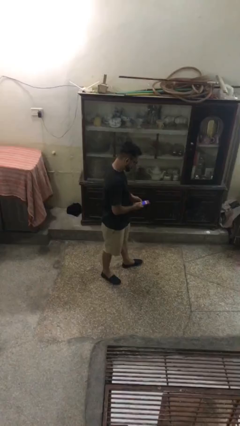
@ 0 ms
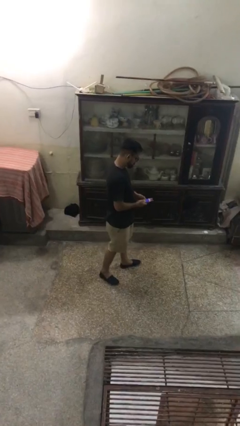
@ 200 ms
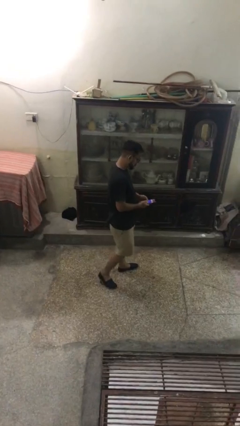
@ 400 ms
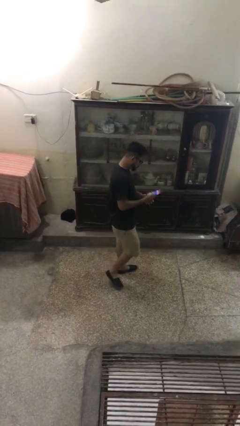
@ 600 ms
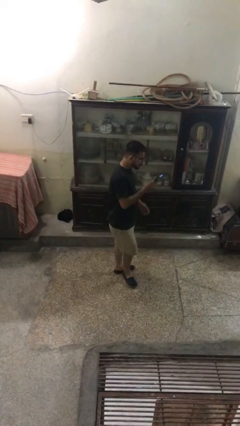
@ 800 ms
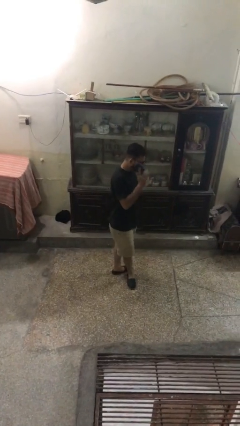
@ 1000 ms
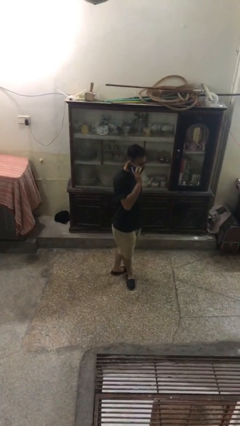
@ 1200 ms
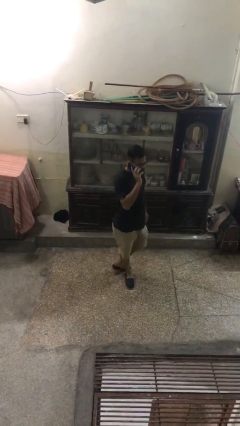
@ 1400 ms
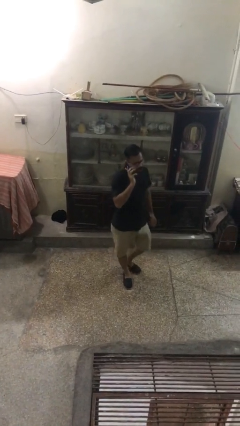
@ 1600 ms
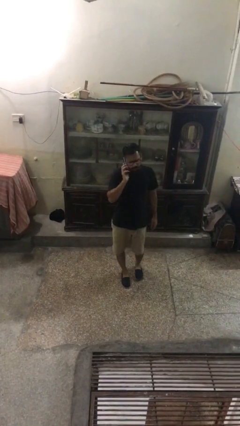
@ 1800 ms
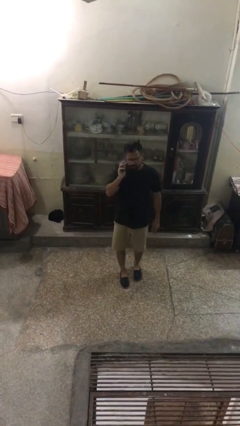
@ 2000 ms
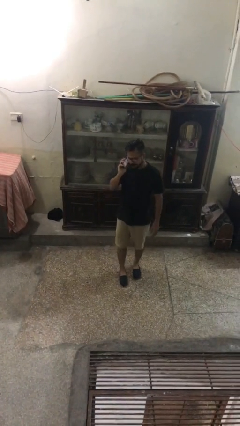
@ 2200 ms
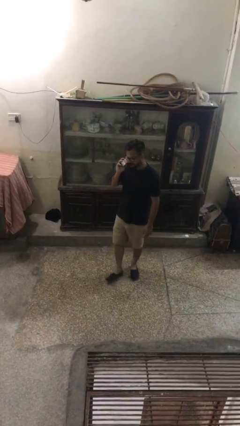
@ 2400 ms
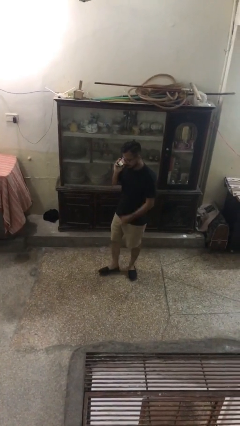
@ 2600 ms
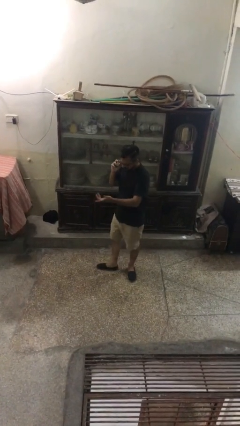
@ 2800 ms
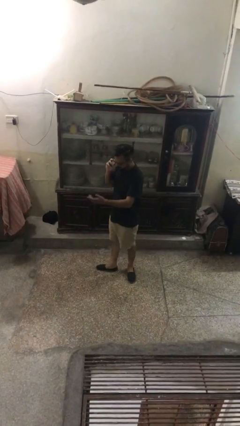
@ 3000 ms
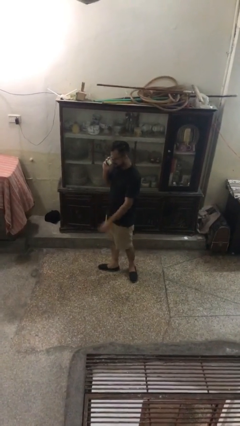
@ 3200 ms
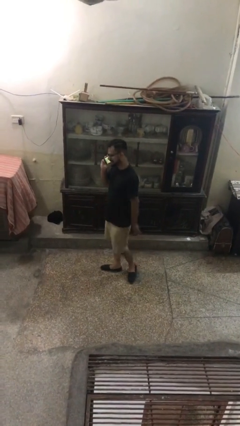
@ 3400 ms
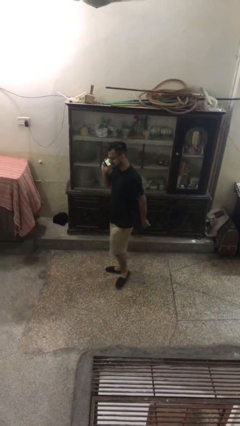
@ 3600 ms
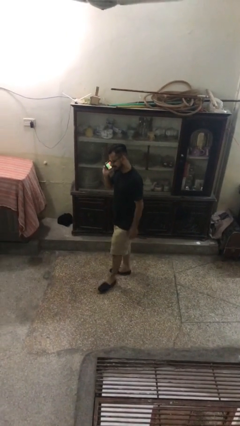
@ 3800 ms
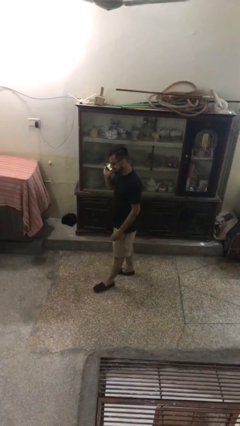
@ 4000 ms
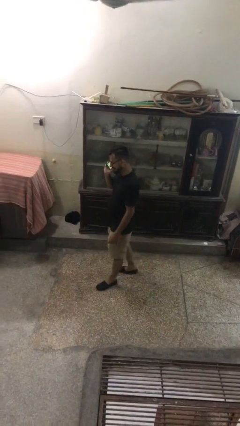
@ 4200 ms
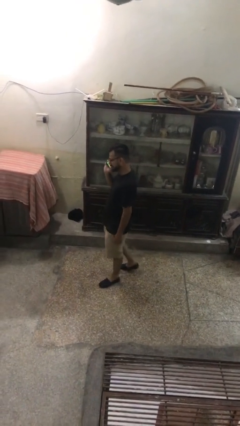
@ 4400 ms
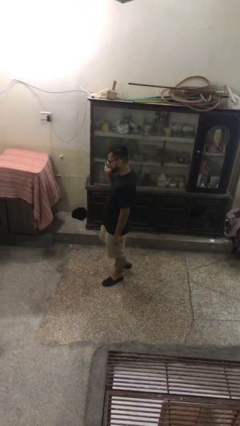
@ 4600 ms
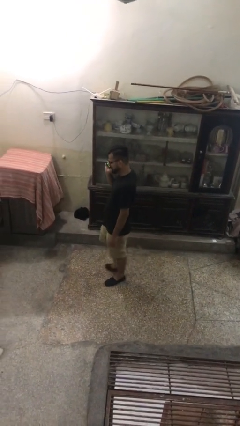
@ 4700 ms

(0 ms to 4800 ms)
person talks on phone

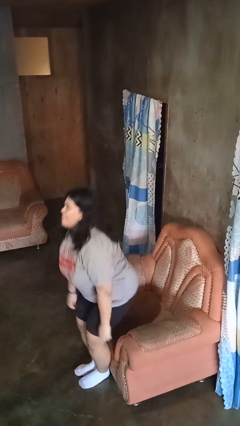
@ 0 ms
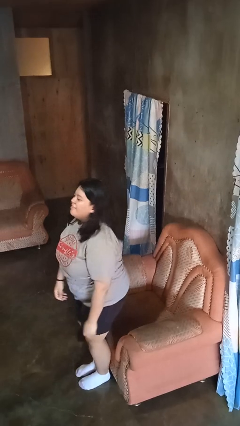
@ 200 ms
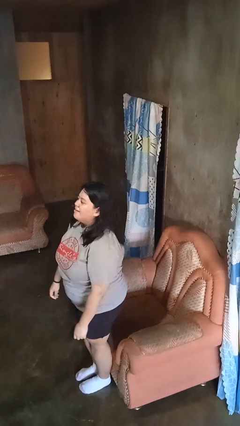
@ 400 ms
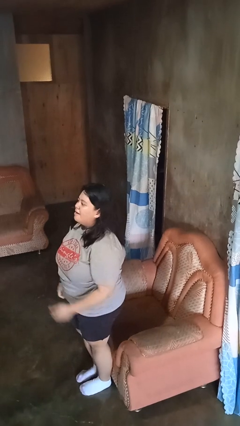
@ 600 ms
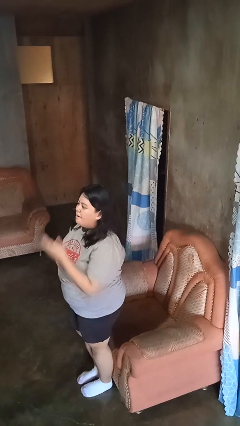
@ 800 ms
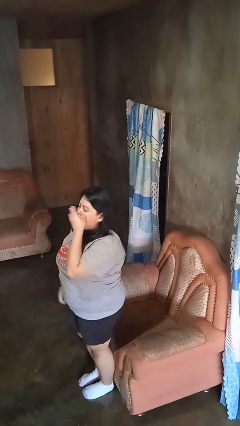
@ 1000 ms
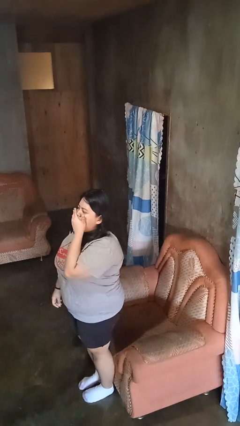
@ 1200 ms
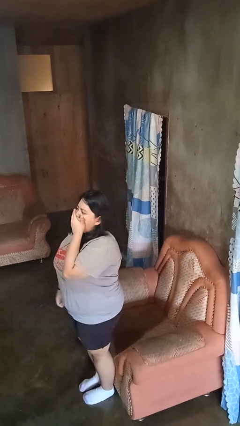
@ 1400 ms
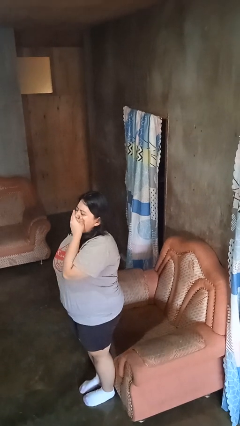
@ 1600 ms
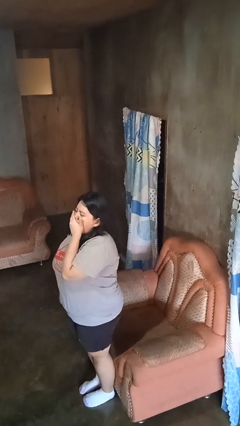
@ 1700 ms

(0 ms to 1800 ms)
person yawns

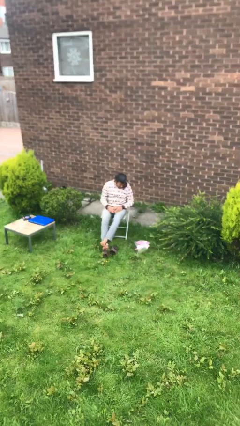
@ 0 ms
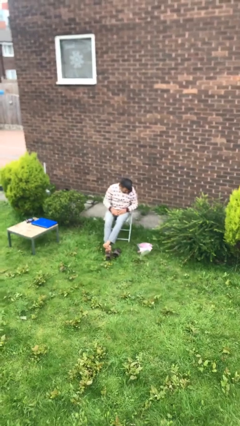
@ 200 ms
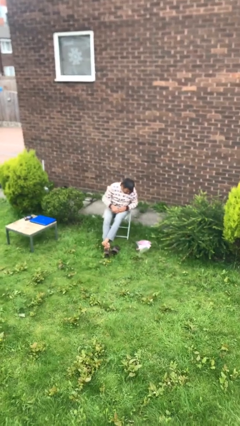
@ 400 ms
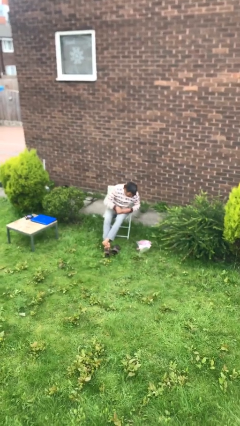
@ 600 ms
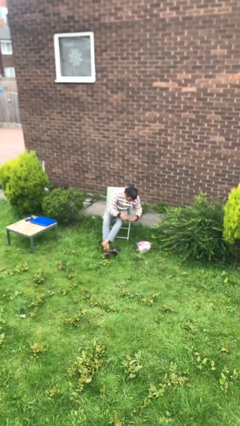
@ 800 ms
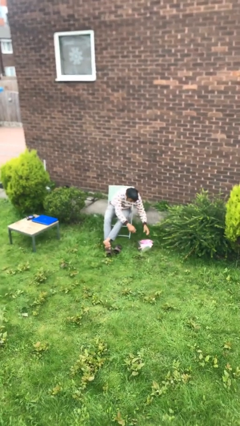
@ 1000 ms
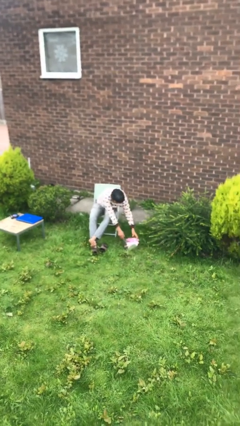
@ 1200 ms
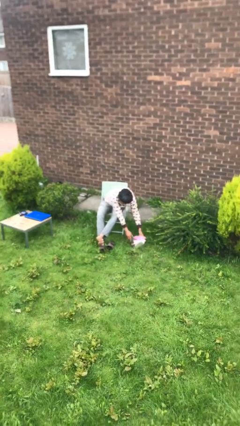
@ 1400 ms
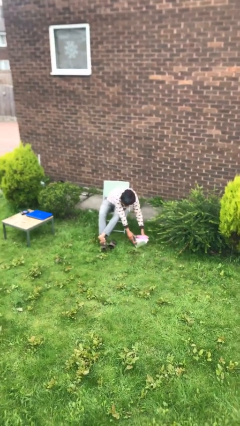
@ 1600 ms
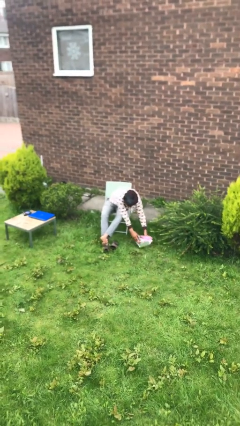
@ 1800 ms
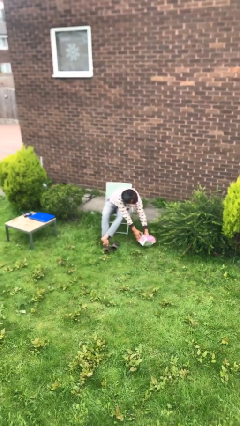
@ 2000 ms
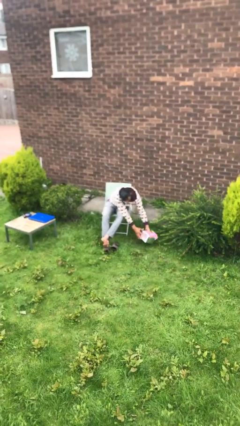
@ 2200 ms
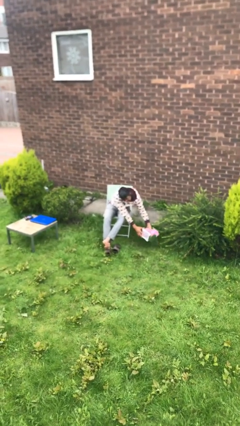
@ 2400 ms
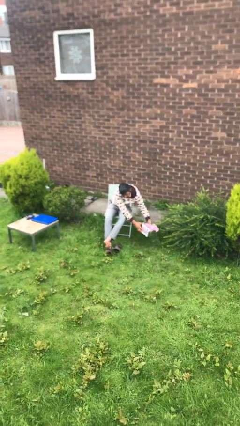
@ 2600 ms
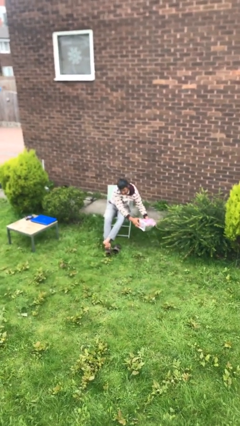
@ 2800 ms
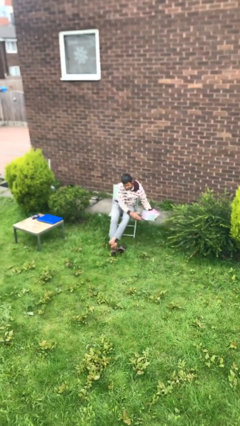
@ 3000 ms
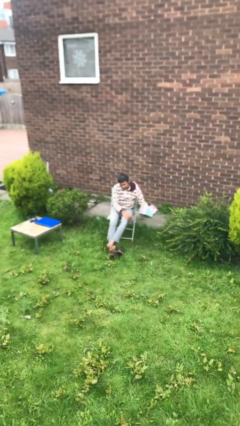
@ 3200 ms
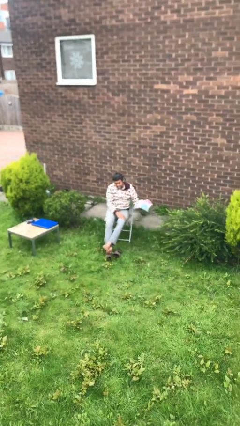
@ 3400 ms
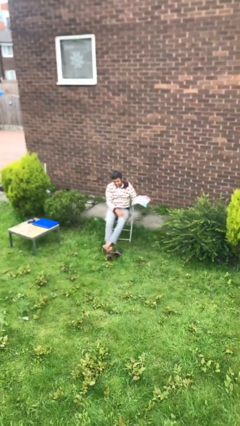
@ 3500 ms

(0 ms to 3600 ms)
person picks up object from floor

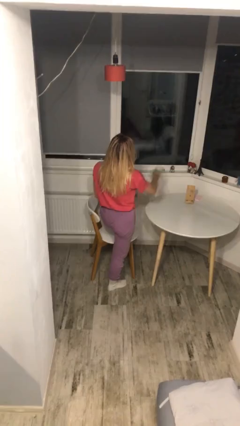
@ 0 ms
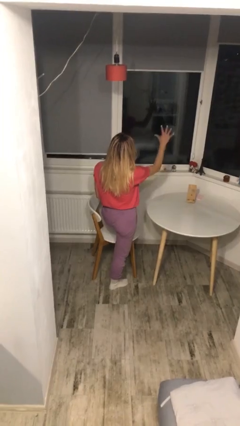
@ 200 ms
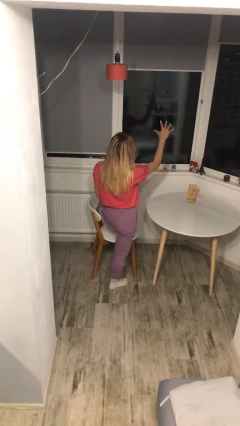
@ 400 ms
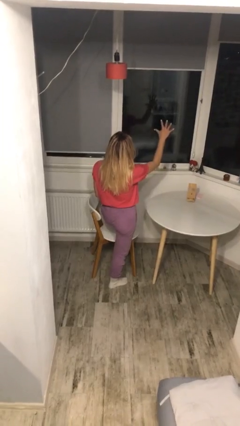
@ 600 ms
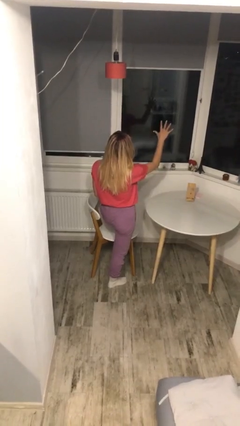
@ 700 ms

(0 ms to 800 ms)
person gestures number five

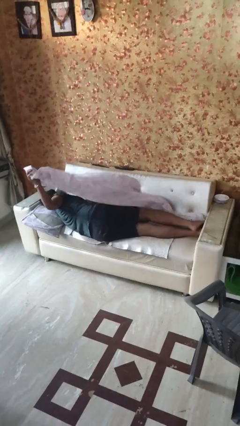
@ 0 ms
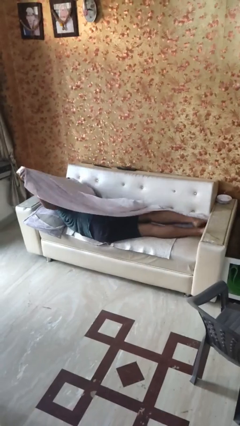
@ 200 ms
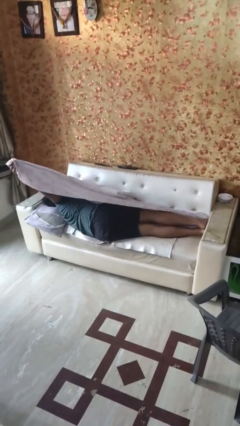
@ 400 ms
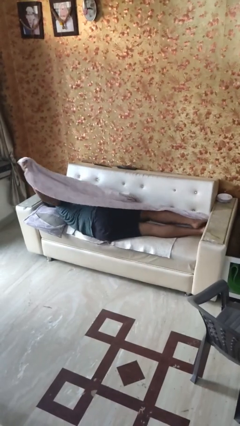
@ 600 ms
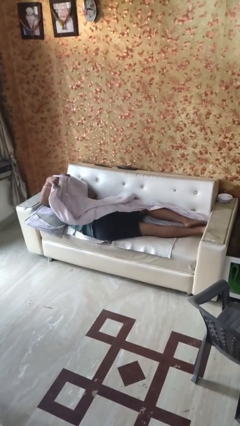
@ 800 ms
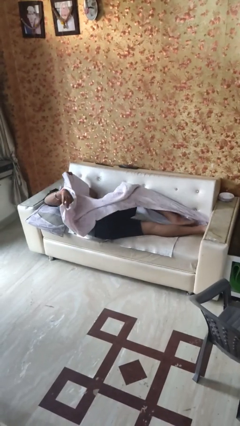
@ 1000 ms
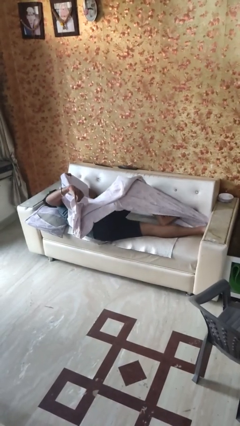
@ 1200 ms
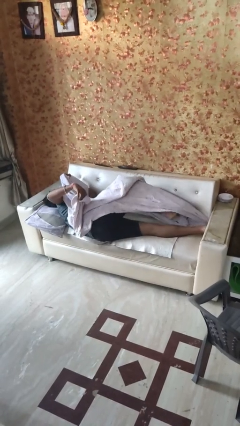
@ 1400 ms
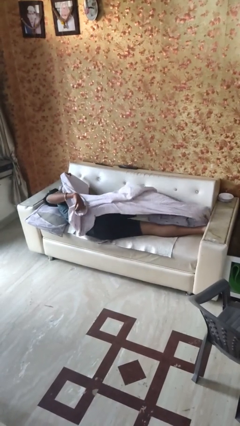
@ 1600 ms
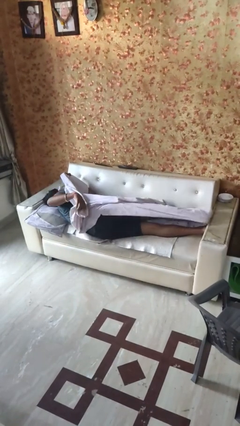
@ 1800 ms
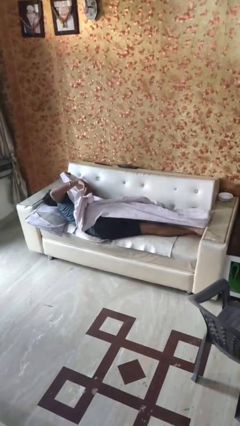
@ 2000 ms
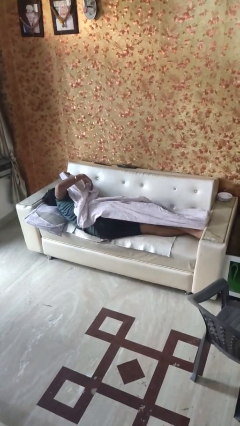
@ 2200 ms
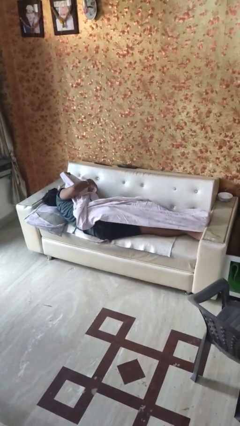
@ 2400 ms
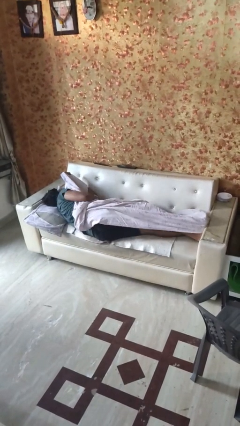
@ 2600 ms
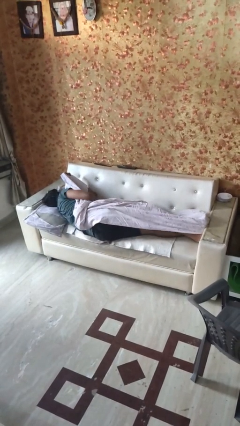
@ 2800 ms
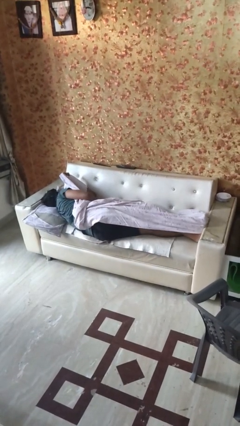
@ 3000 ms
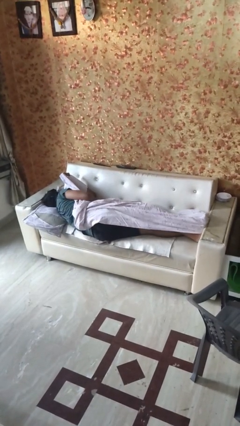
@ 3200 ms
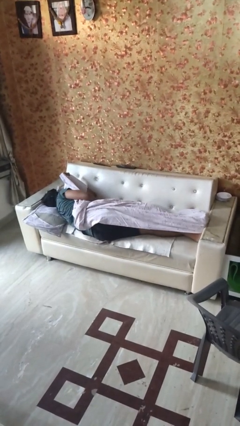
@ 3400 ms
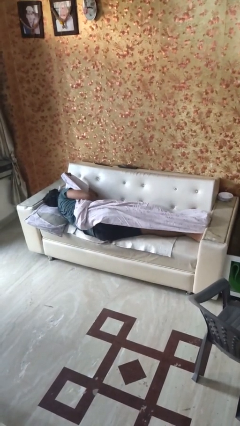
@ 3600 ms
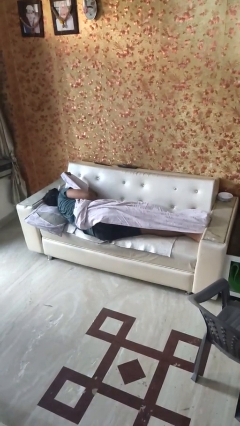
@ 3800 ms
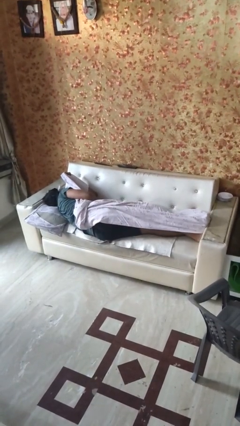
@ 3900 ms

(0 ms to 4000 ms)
person covers with bedsheets

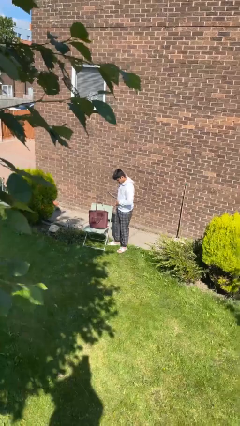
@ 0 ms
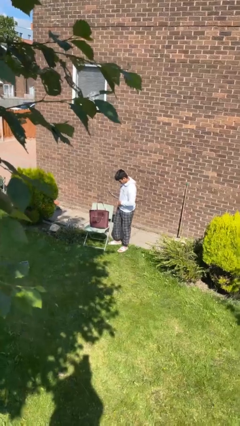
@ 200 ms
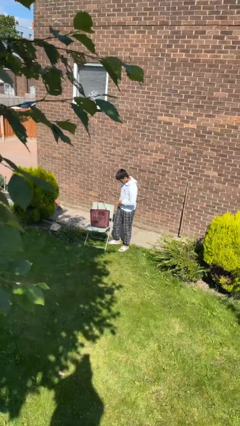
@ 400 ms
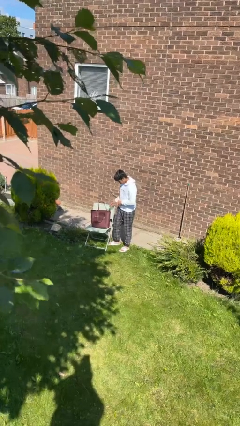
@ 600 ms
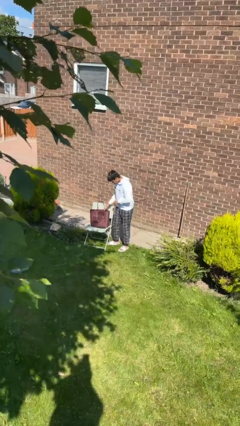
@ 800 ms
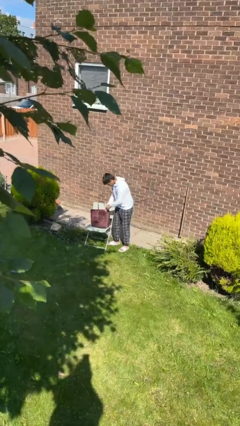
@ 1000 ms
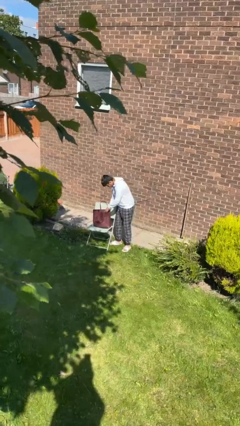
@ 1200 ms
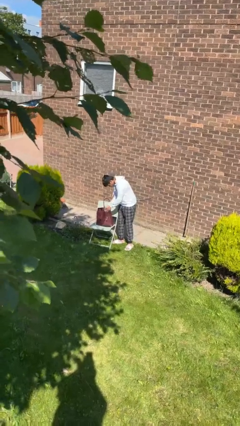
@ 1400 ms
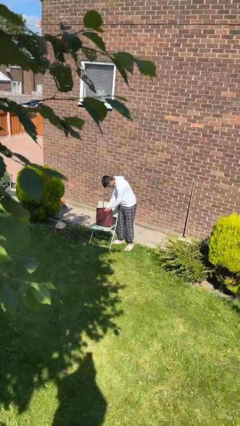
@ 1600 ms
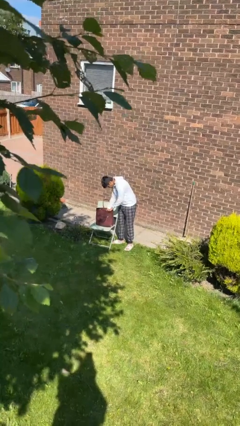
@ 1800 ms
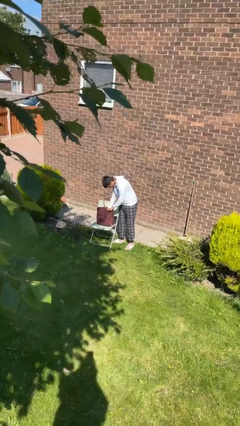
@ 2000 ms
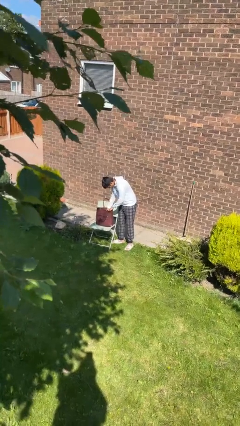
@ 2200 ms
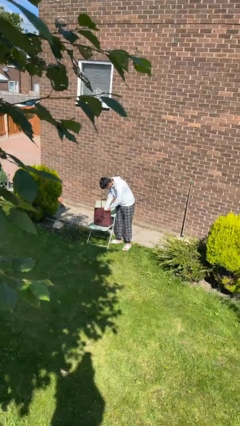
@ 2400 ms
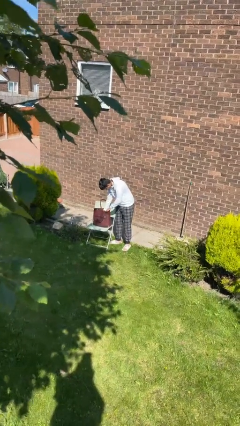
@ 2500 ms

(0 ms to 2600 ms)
person searches in purse
